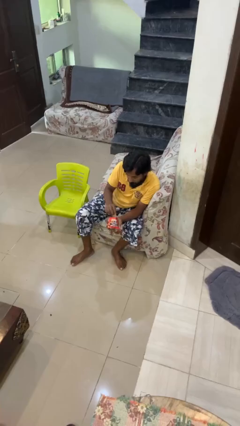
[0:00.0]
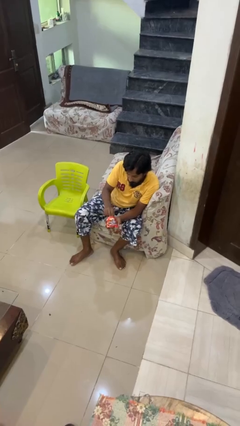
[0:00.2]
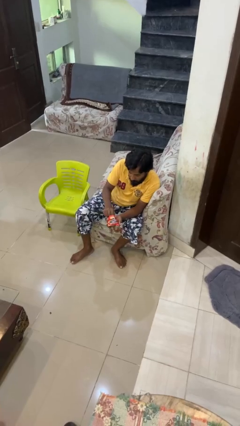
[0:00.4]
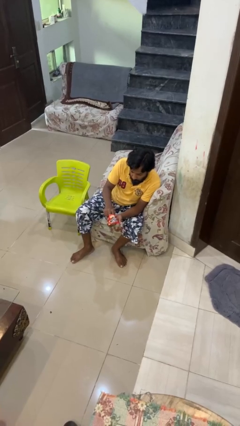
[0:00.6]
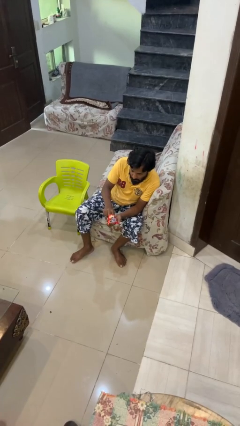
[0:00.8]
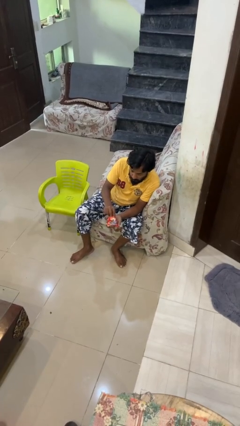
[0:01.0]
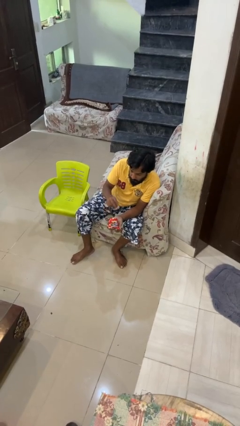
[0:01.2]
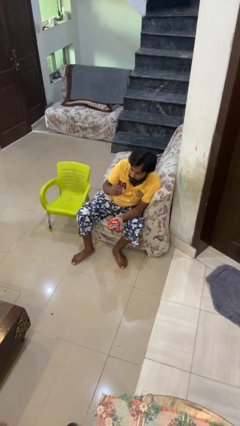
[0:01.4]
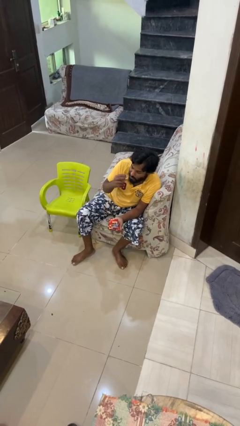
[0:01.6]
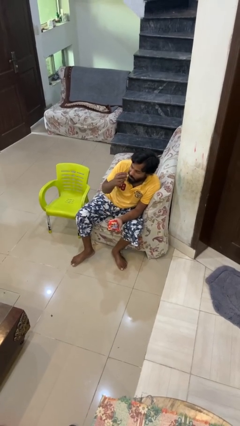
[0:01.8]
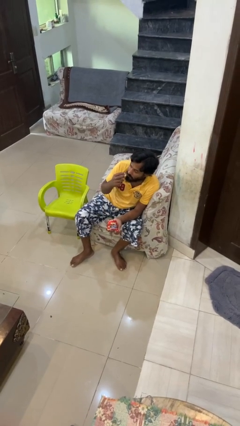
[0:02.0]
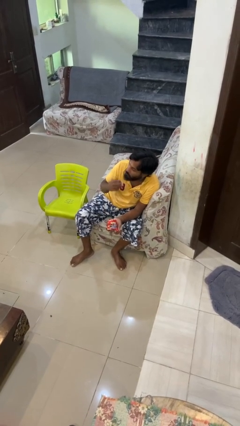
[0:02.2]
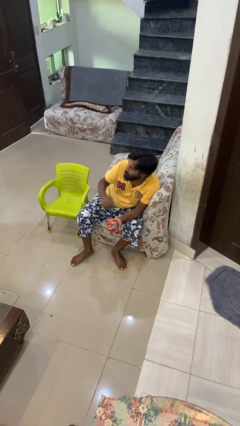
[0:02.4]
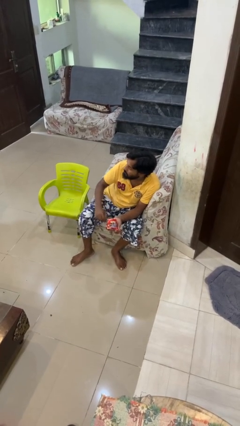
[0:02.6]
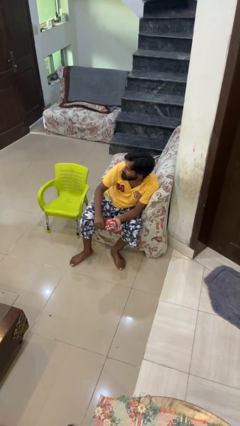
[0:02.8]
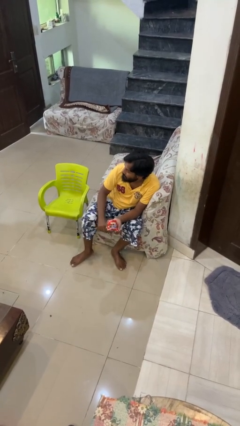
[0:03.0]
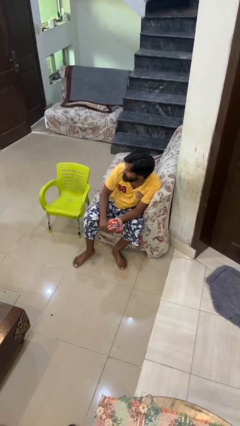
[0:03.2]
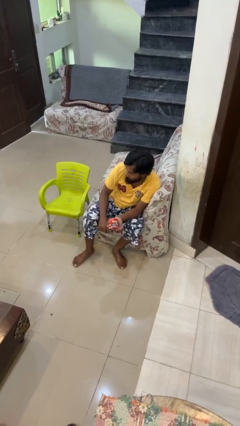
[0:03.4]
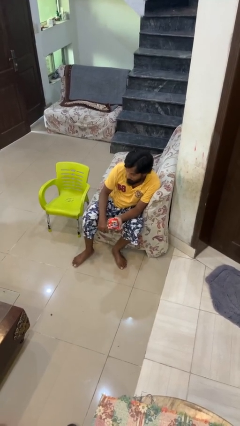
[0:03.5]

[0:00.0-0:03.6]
person eats snack from bag

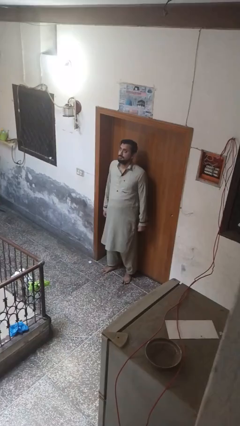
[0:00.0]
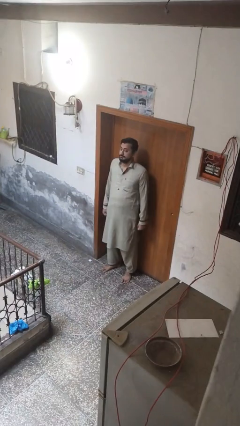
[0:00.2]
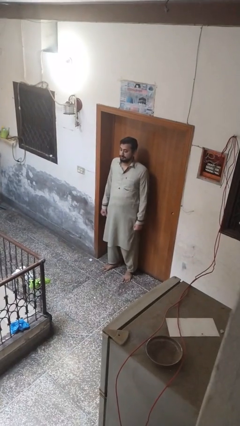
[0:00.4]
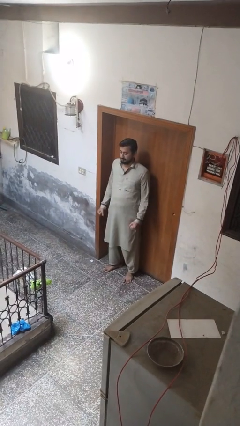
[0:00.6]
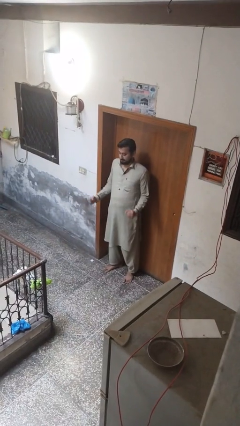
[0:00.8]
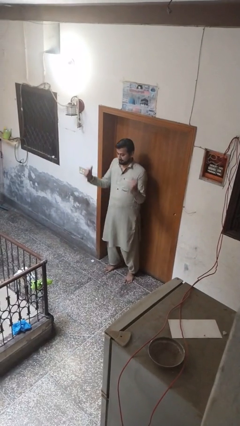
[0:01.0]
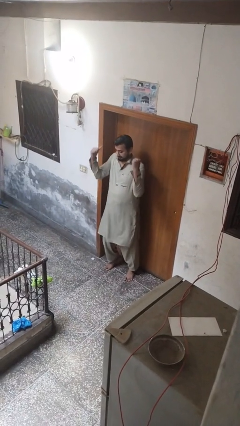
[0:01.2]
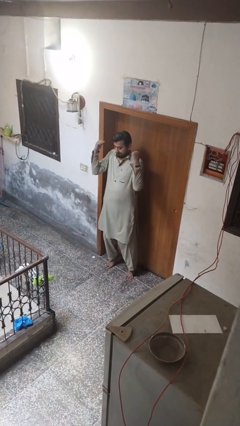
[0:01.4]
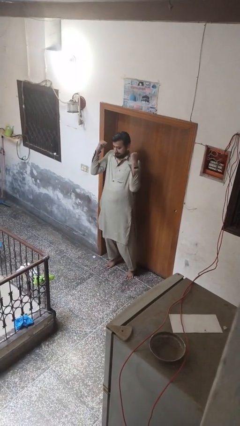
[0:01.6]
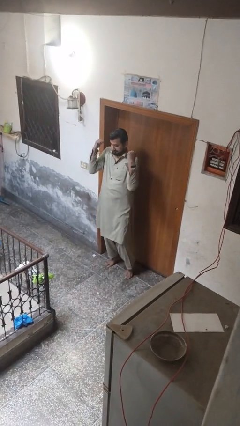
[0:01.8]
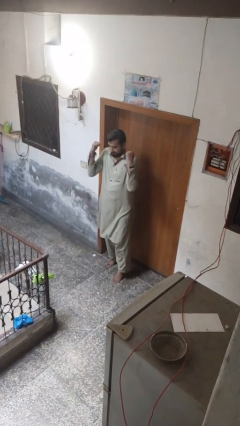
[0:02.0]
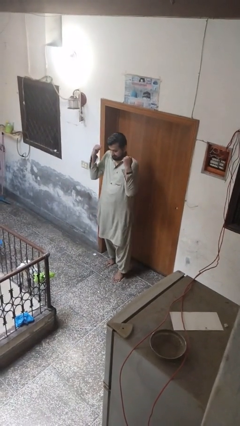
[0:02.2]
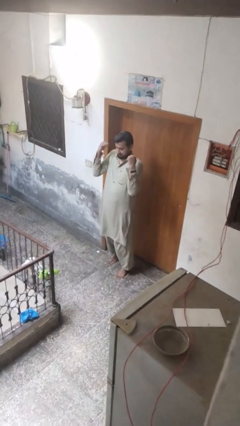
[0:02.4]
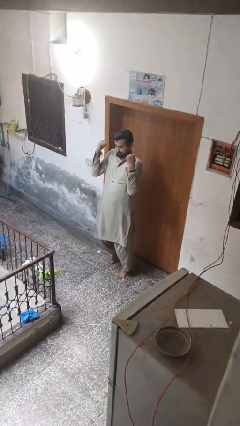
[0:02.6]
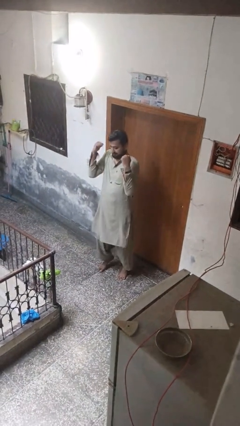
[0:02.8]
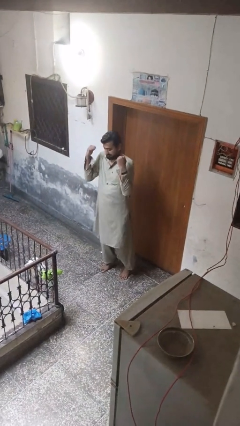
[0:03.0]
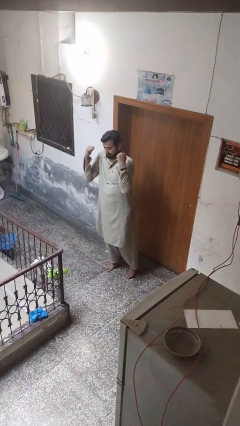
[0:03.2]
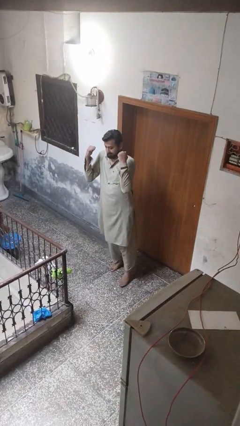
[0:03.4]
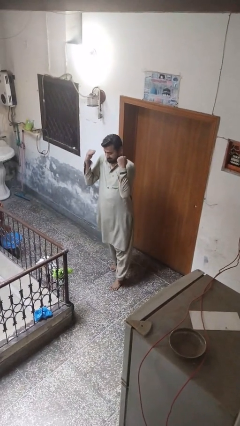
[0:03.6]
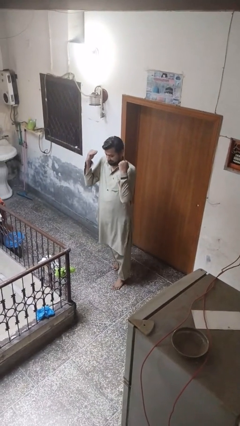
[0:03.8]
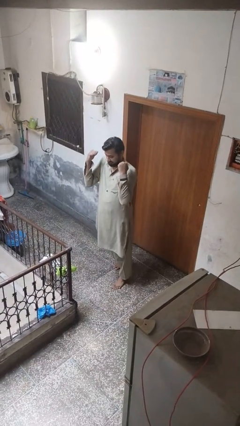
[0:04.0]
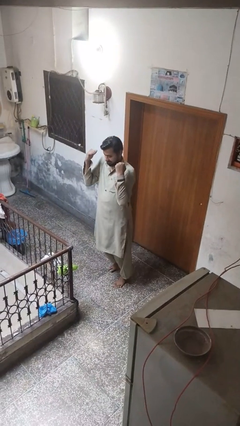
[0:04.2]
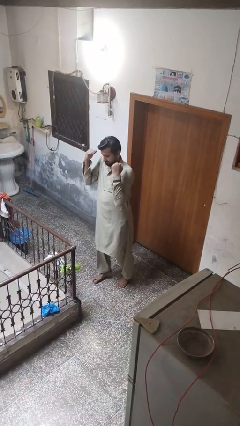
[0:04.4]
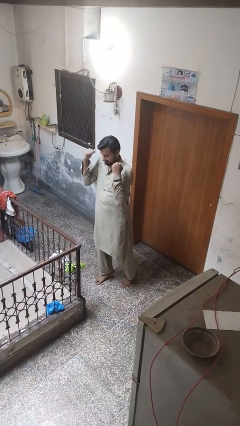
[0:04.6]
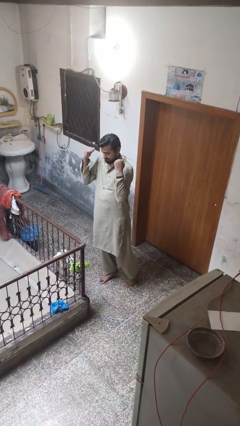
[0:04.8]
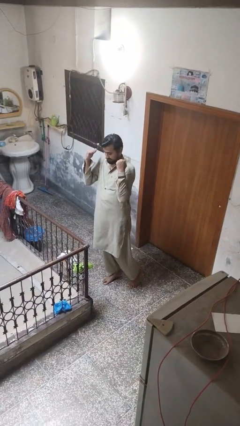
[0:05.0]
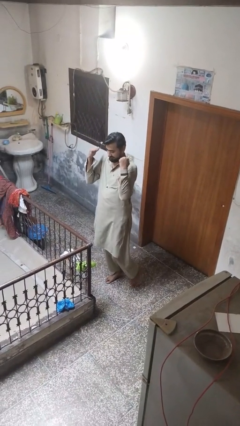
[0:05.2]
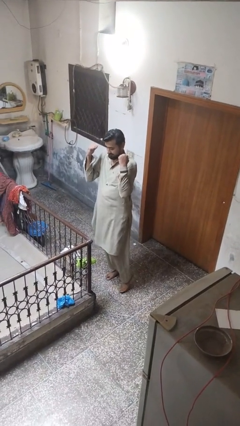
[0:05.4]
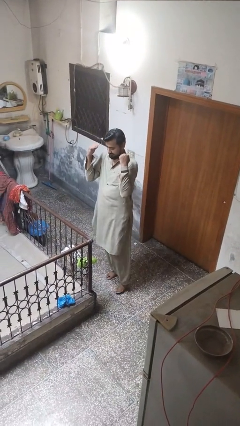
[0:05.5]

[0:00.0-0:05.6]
person walks tiptoe

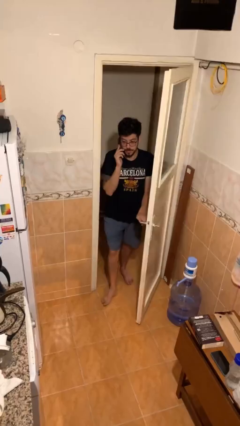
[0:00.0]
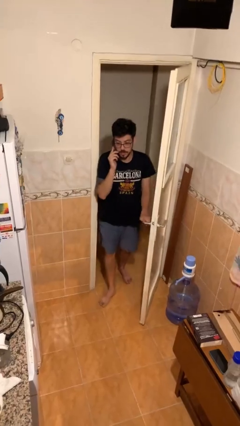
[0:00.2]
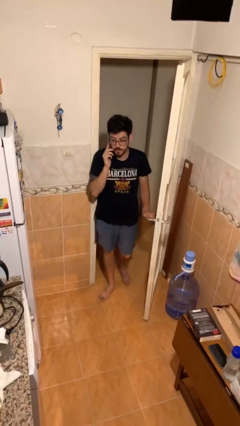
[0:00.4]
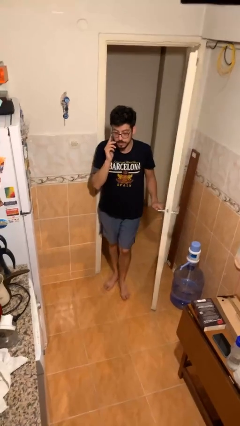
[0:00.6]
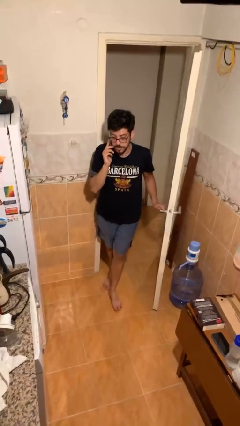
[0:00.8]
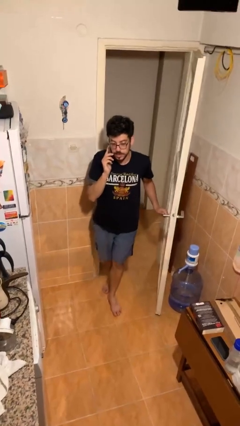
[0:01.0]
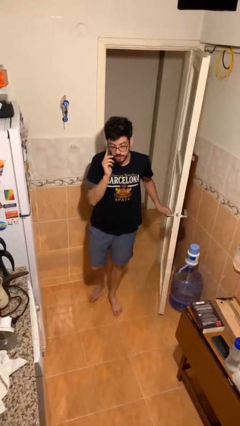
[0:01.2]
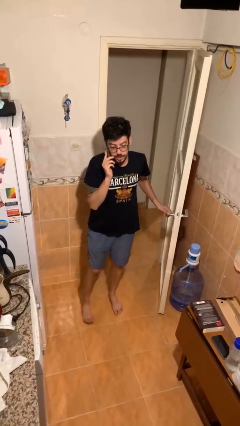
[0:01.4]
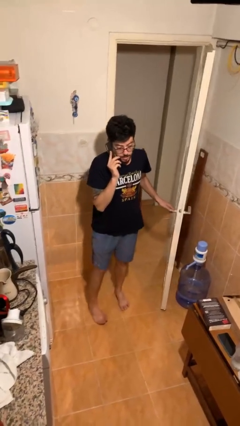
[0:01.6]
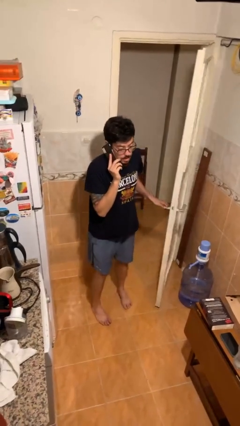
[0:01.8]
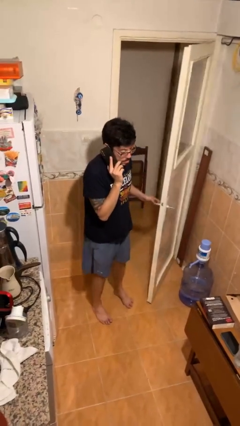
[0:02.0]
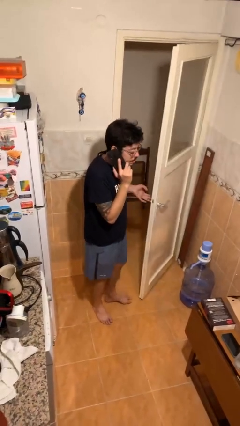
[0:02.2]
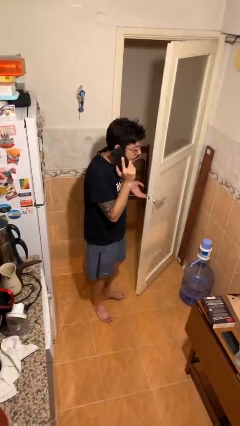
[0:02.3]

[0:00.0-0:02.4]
person enters scene through structure

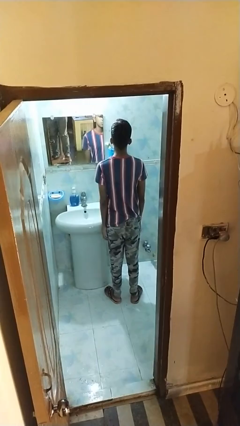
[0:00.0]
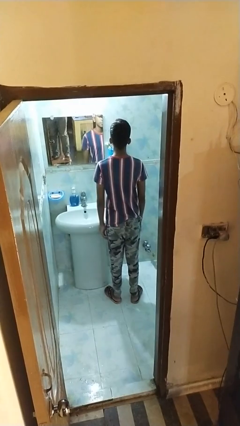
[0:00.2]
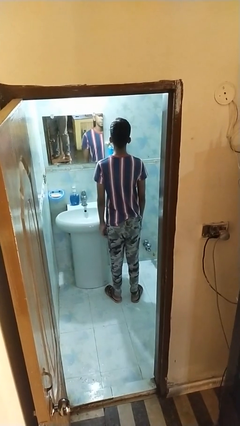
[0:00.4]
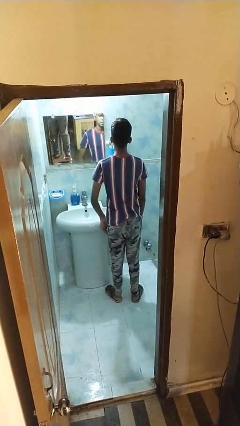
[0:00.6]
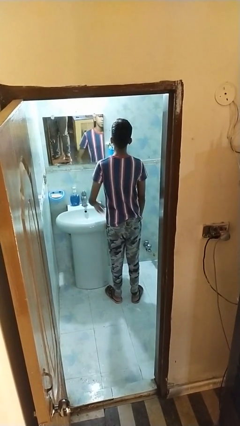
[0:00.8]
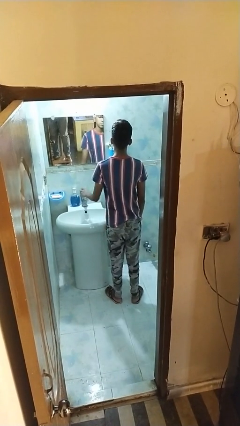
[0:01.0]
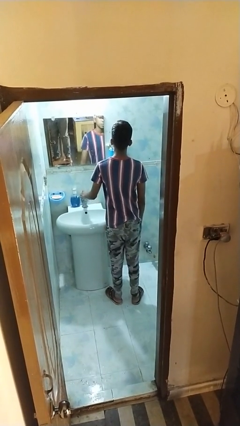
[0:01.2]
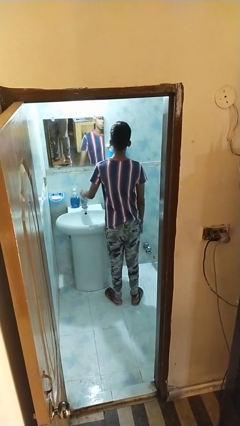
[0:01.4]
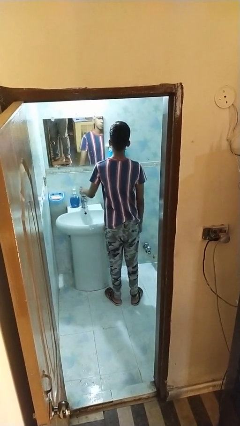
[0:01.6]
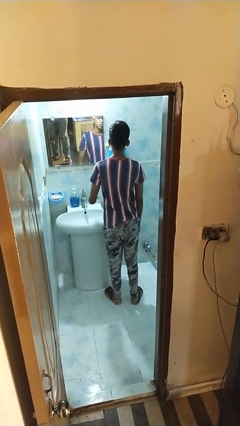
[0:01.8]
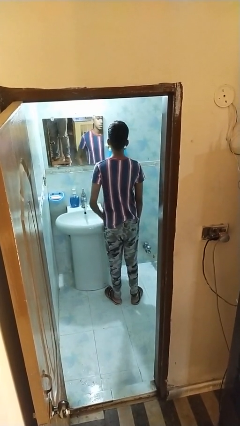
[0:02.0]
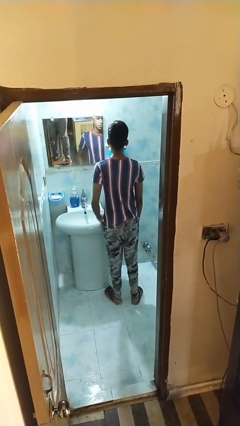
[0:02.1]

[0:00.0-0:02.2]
person turns on faucet

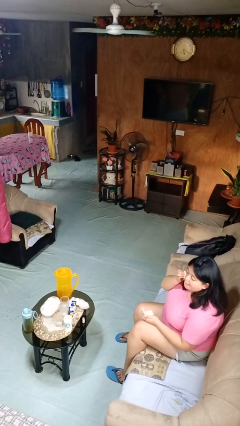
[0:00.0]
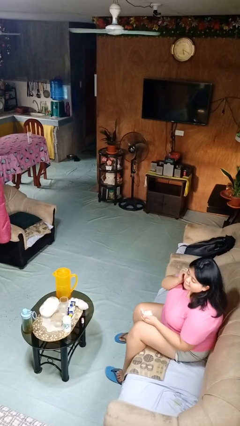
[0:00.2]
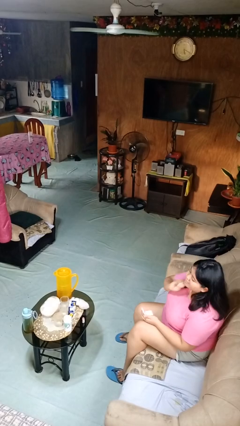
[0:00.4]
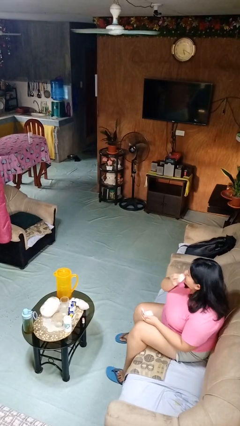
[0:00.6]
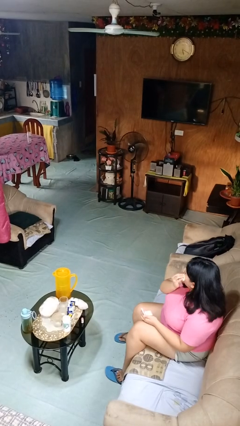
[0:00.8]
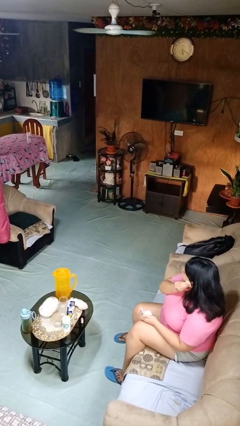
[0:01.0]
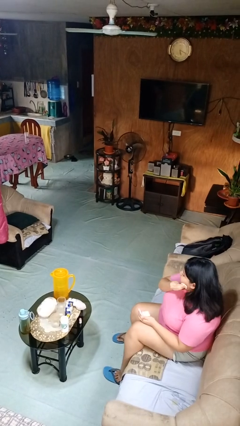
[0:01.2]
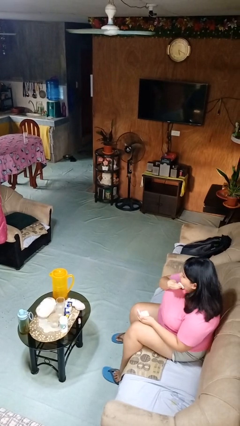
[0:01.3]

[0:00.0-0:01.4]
person applies foundation makeup

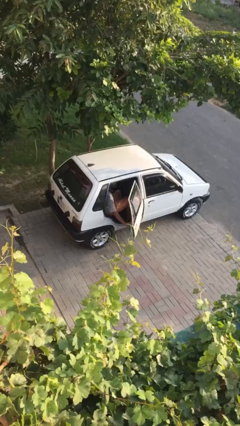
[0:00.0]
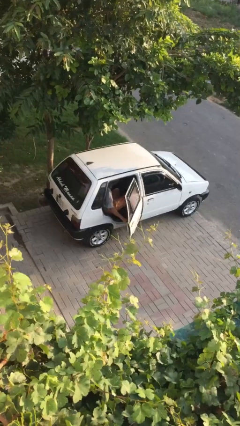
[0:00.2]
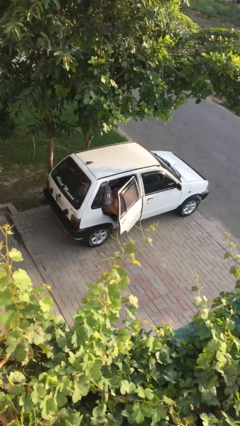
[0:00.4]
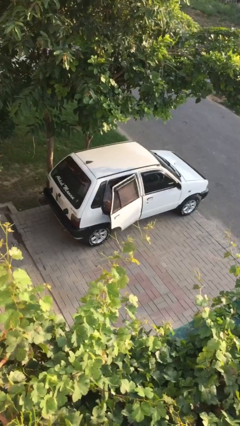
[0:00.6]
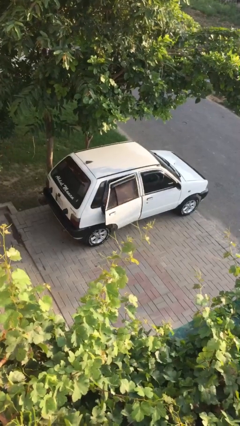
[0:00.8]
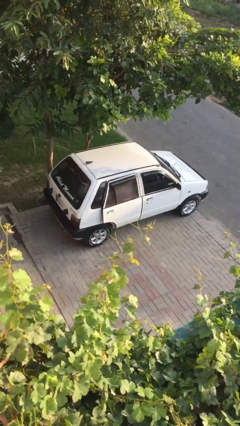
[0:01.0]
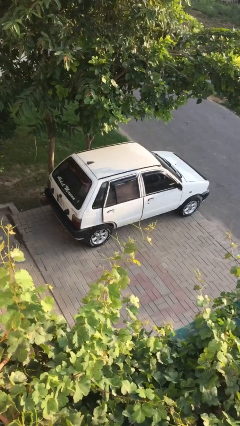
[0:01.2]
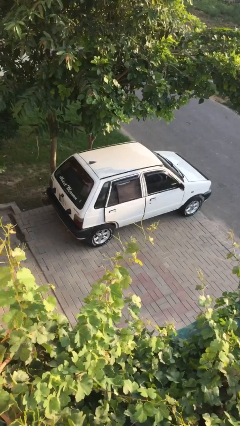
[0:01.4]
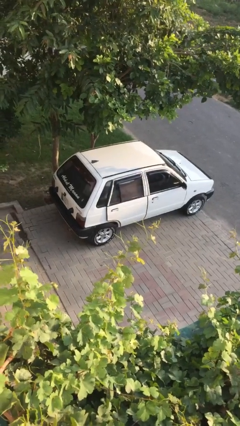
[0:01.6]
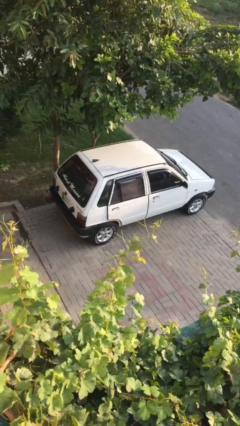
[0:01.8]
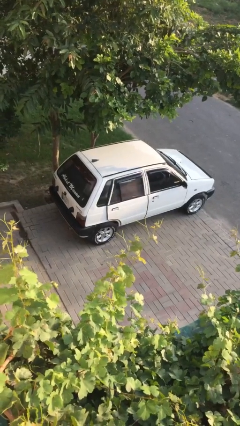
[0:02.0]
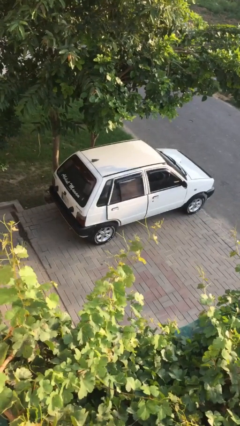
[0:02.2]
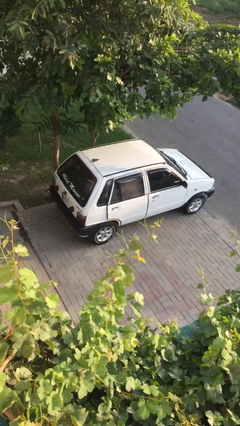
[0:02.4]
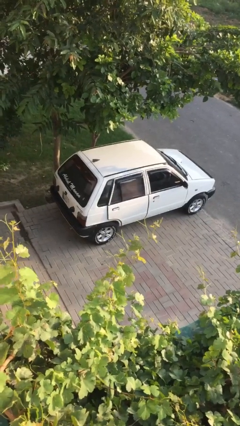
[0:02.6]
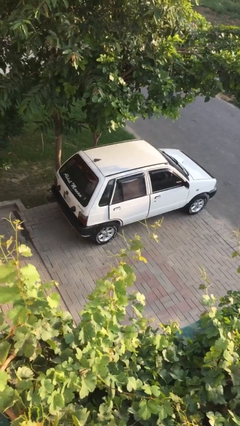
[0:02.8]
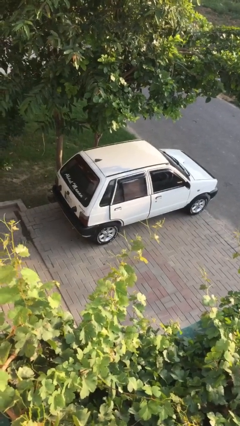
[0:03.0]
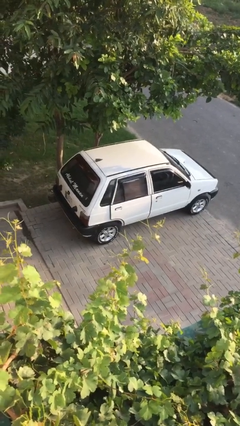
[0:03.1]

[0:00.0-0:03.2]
person closes car door
